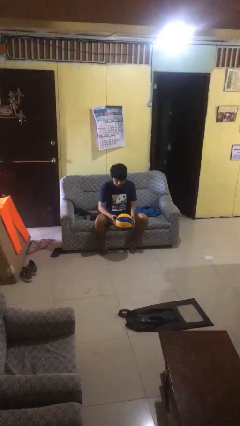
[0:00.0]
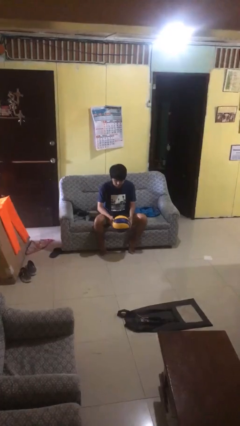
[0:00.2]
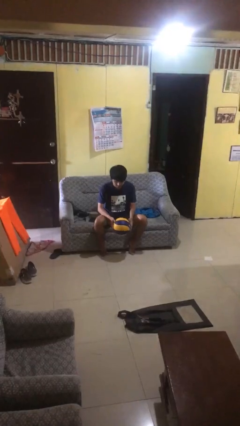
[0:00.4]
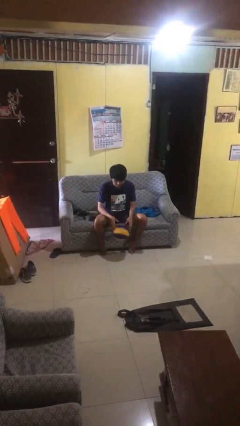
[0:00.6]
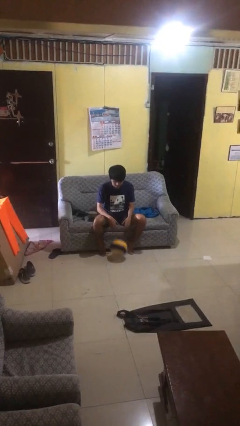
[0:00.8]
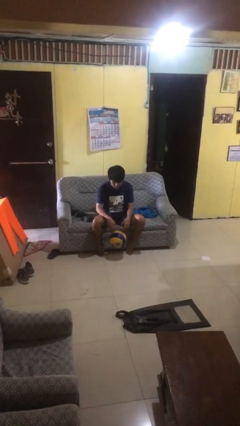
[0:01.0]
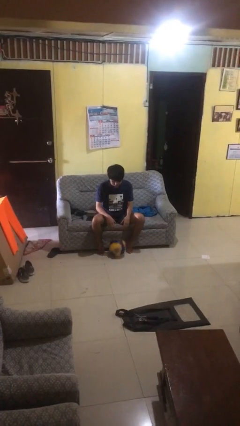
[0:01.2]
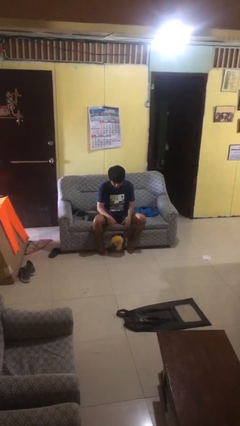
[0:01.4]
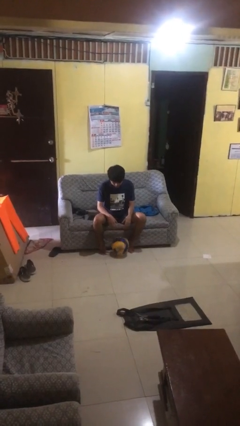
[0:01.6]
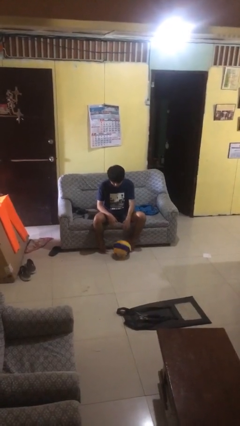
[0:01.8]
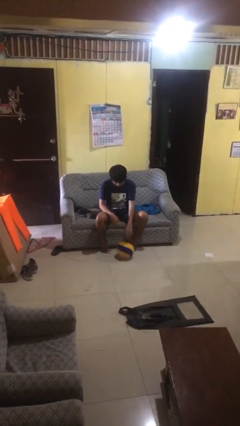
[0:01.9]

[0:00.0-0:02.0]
person drops object

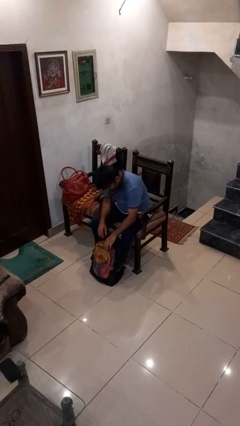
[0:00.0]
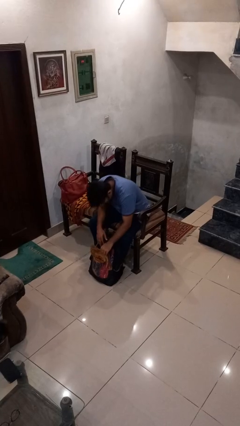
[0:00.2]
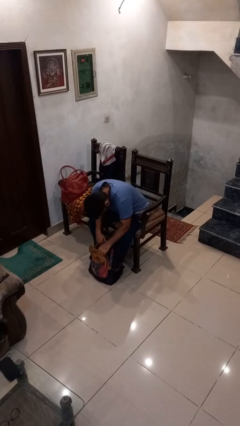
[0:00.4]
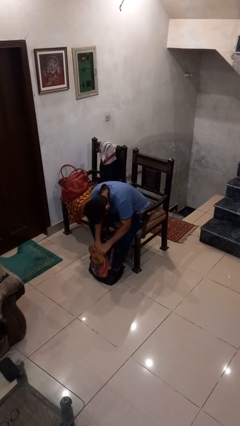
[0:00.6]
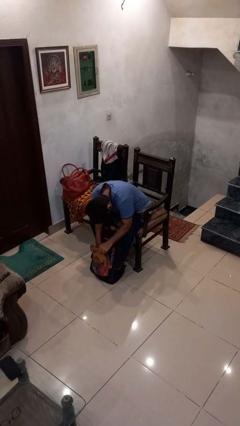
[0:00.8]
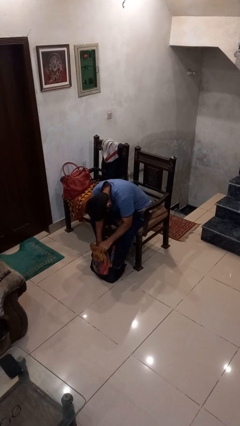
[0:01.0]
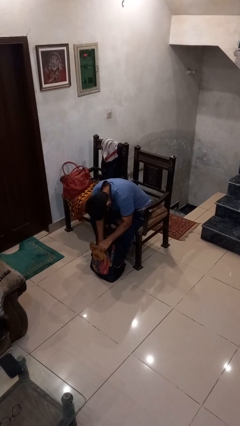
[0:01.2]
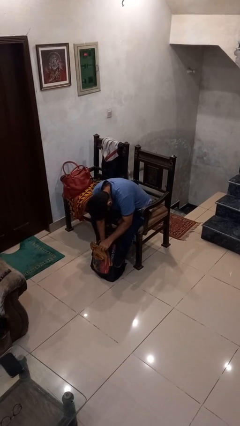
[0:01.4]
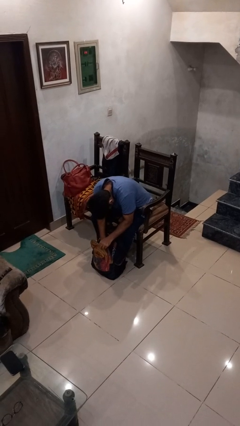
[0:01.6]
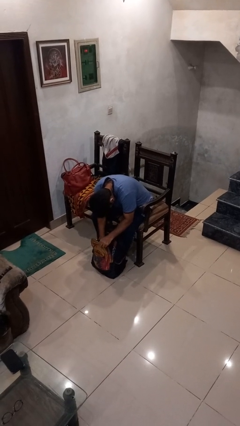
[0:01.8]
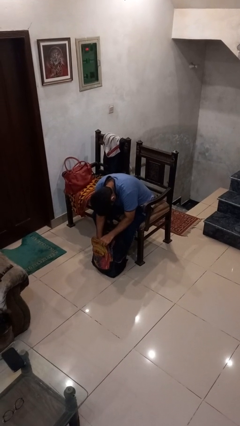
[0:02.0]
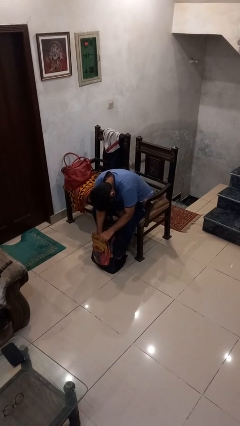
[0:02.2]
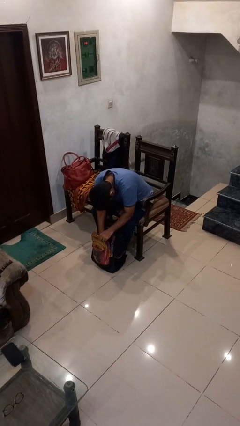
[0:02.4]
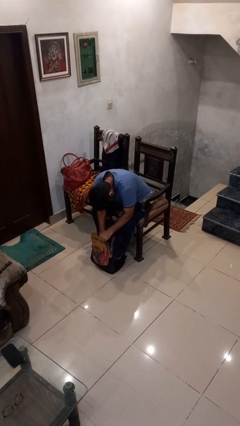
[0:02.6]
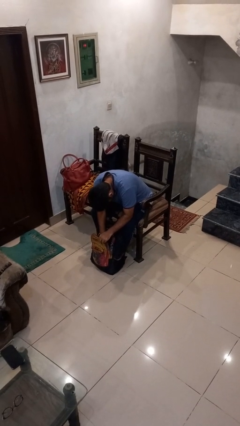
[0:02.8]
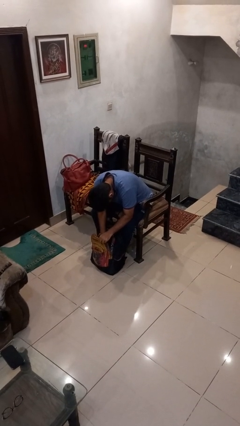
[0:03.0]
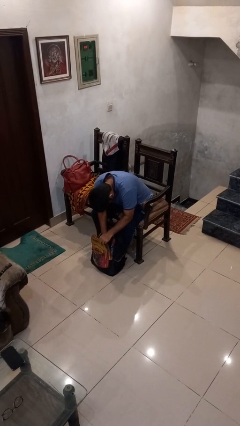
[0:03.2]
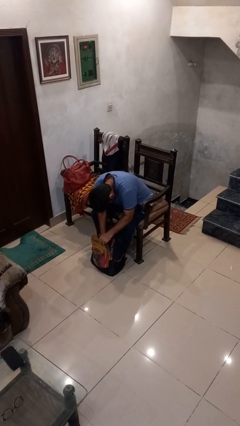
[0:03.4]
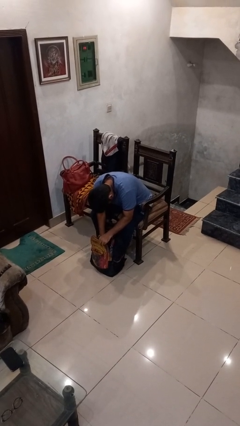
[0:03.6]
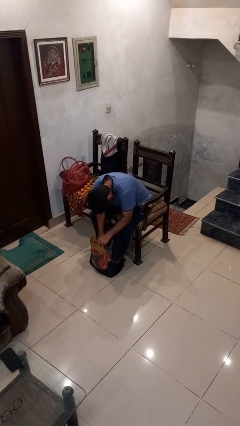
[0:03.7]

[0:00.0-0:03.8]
person searches in backpack

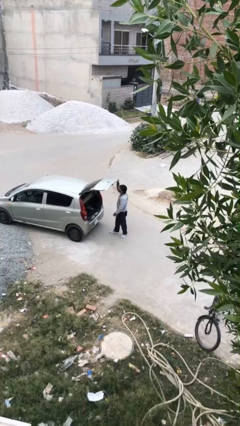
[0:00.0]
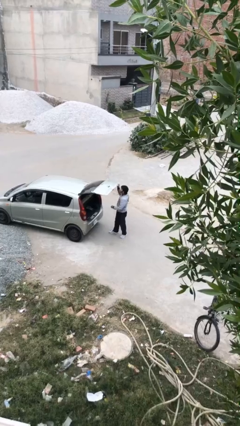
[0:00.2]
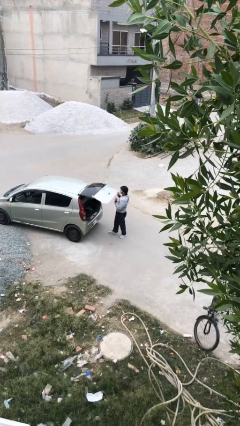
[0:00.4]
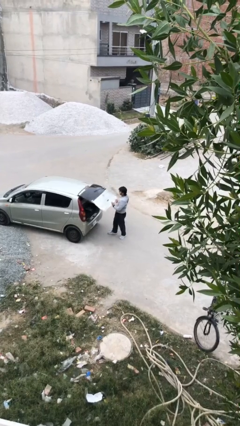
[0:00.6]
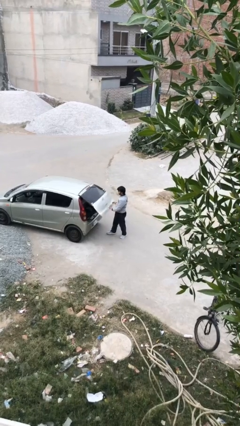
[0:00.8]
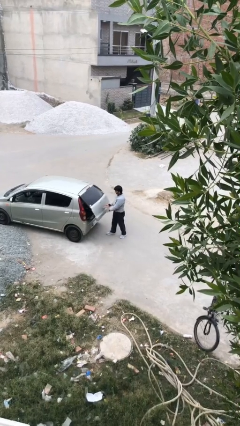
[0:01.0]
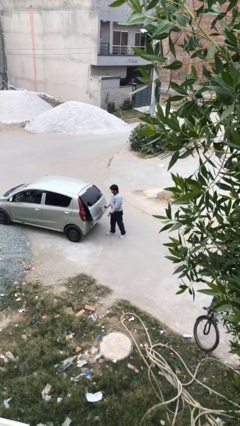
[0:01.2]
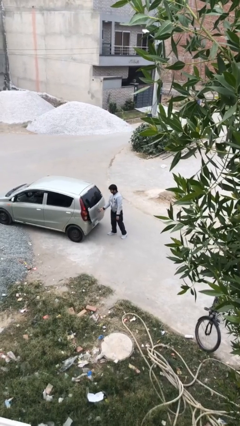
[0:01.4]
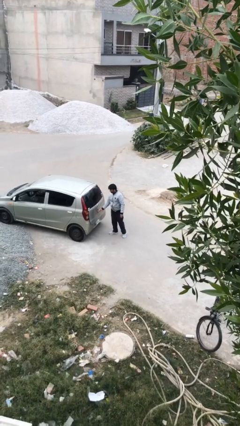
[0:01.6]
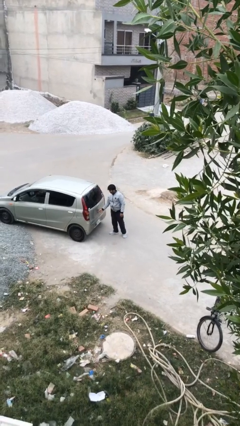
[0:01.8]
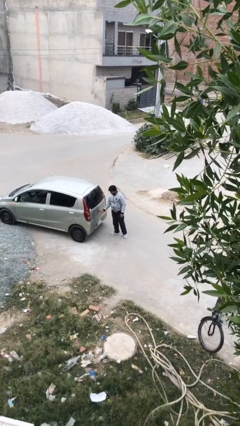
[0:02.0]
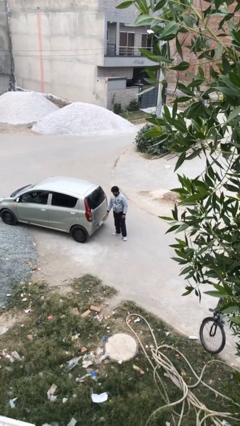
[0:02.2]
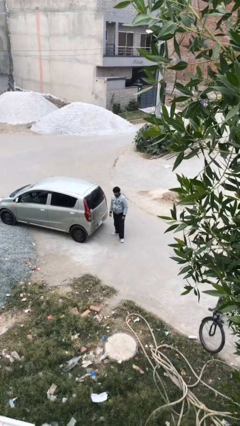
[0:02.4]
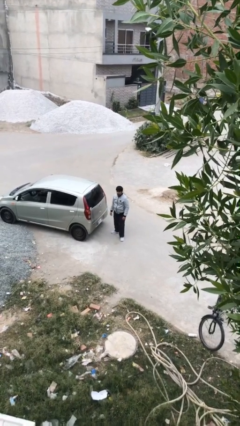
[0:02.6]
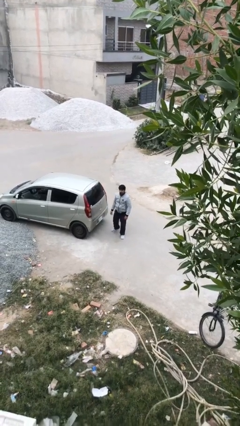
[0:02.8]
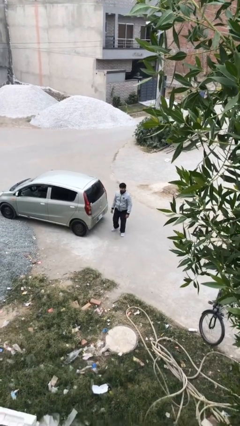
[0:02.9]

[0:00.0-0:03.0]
person closes car trunk

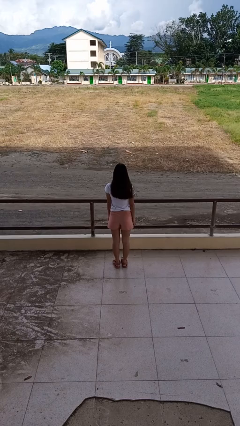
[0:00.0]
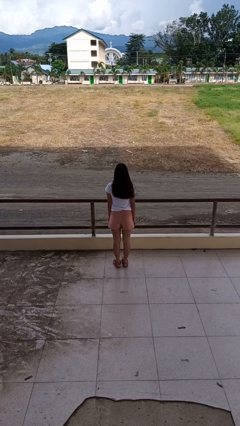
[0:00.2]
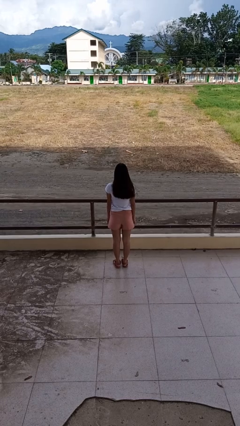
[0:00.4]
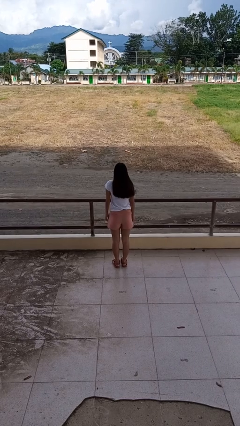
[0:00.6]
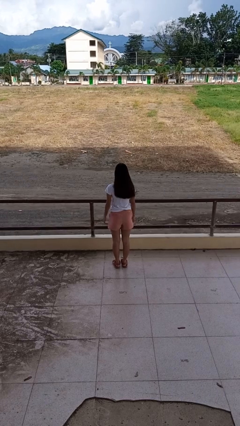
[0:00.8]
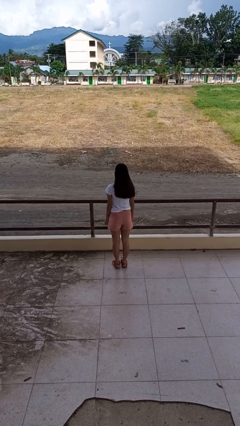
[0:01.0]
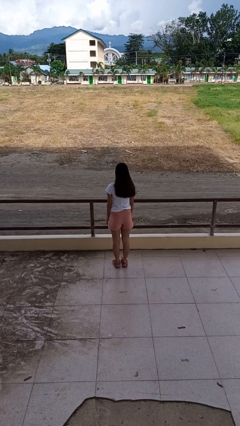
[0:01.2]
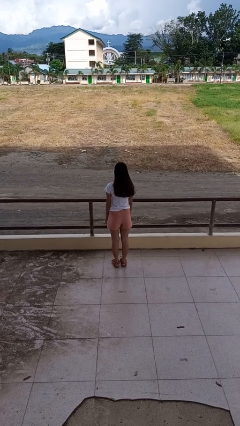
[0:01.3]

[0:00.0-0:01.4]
person shrugs

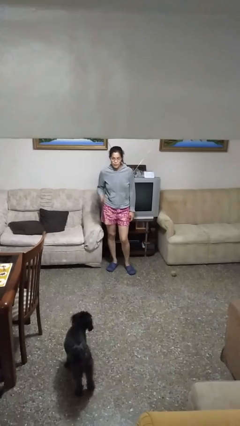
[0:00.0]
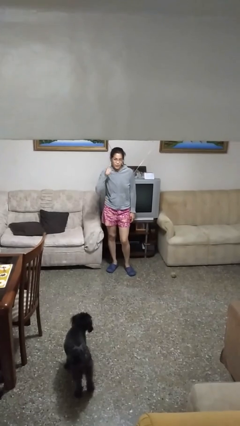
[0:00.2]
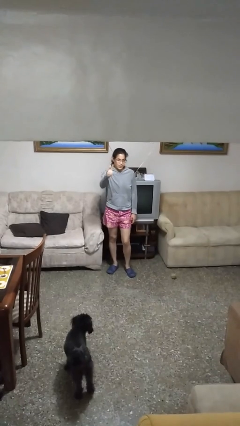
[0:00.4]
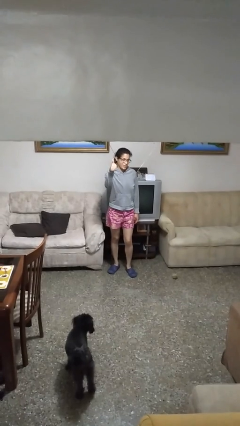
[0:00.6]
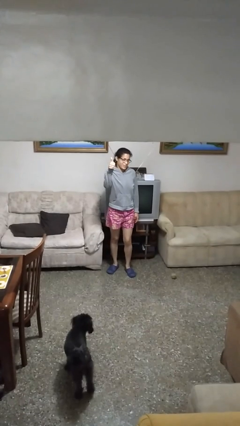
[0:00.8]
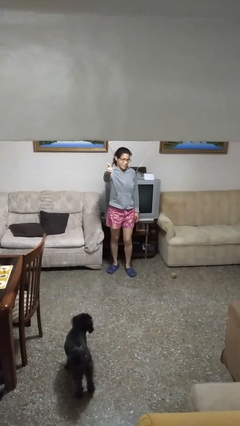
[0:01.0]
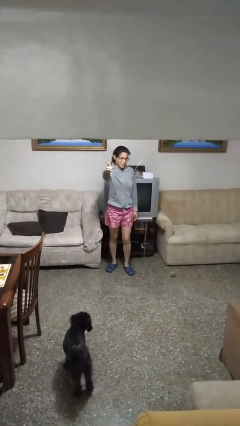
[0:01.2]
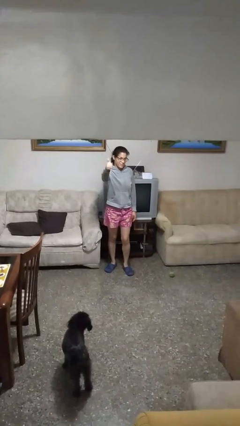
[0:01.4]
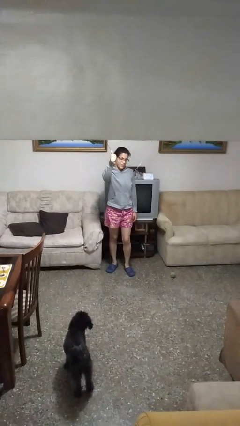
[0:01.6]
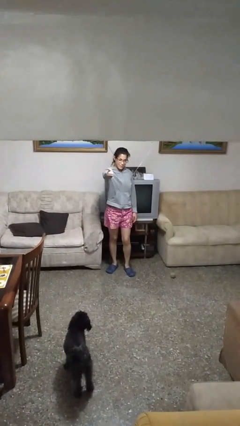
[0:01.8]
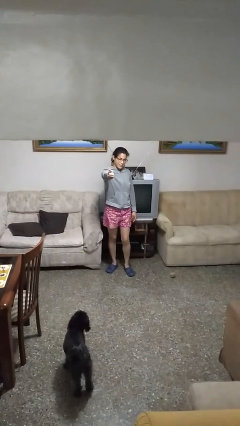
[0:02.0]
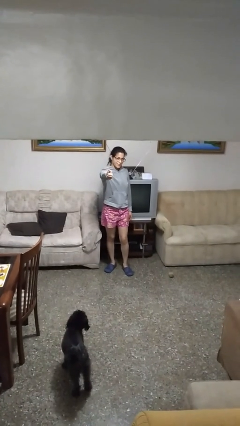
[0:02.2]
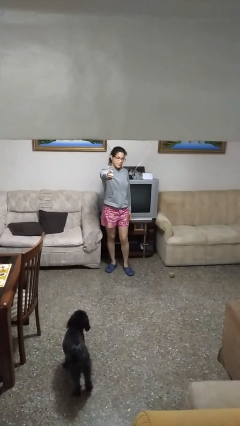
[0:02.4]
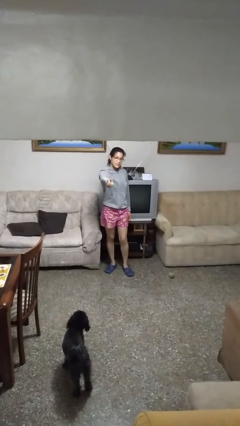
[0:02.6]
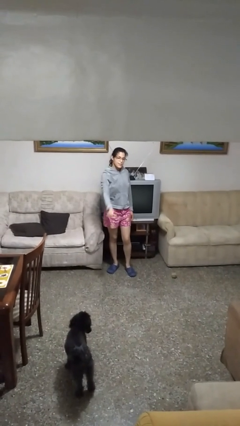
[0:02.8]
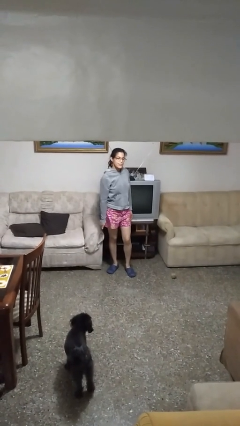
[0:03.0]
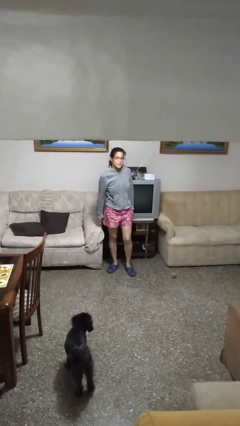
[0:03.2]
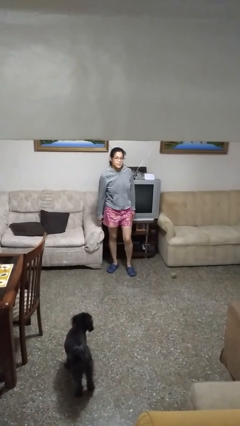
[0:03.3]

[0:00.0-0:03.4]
person gestures thumbs up

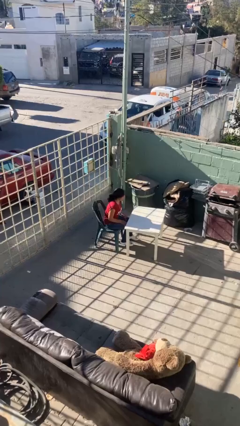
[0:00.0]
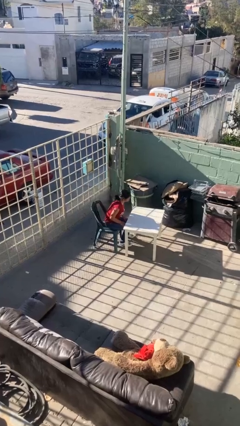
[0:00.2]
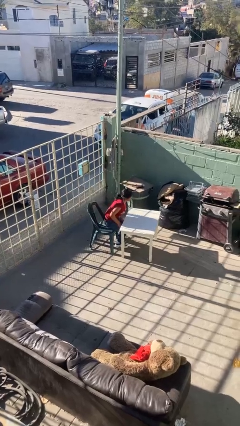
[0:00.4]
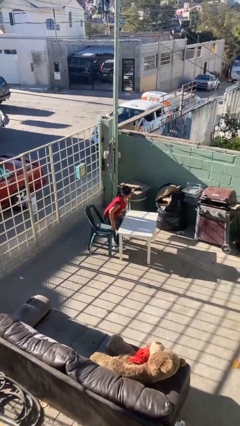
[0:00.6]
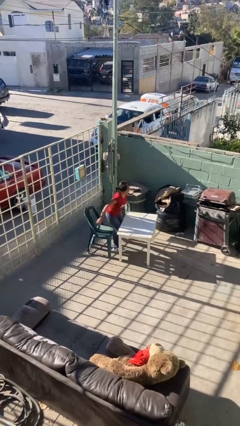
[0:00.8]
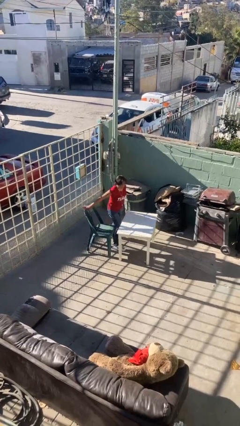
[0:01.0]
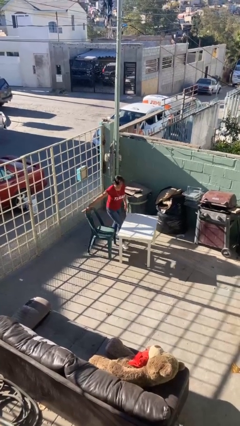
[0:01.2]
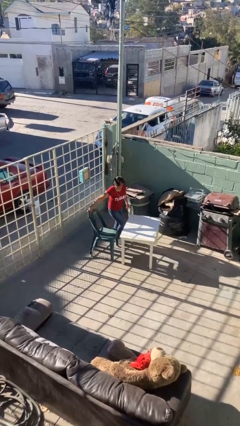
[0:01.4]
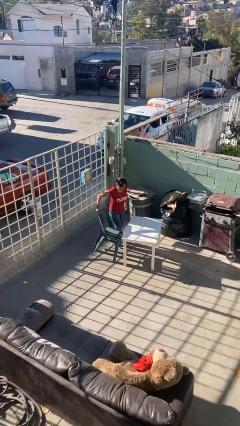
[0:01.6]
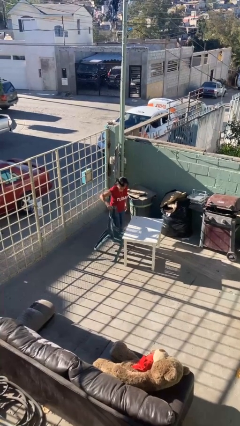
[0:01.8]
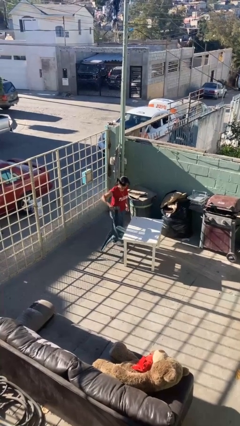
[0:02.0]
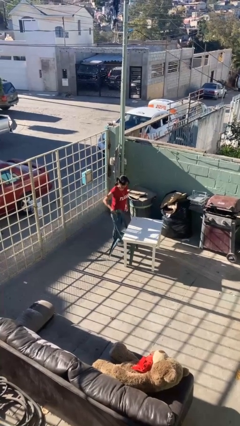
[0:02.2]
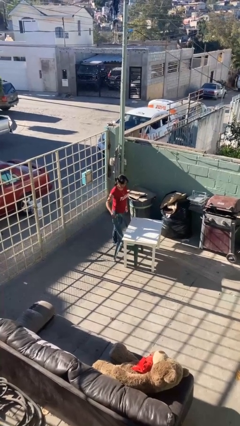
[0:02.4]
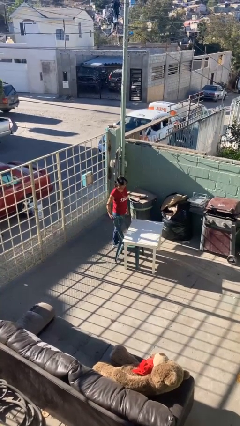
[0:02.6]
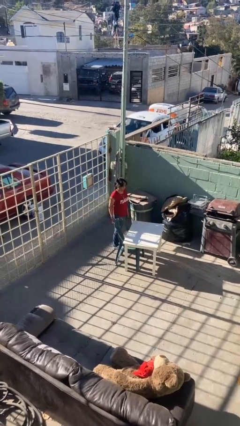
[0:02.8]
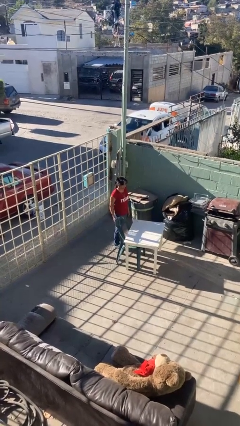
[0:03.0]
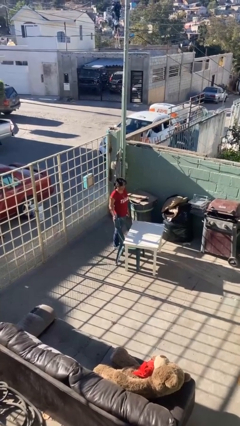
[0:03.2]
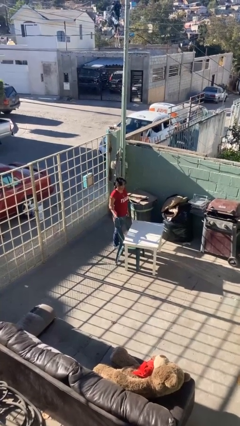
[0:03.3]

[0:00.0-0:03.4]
person stands up

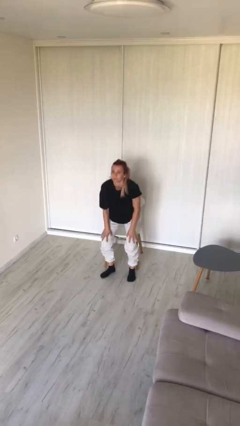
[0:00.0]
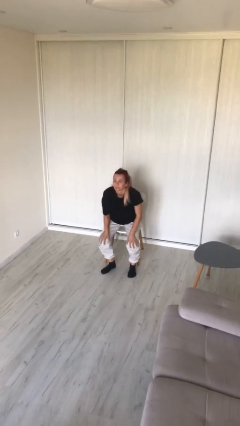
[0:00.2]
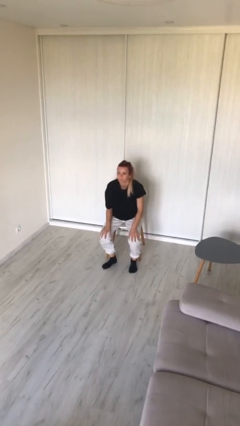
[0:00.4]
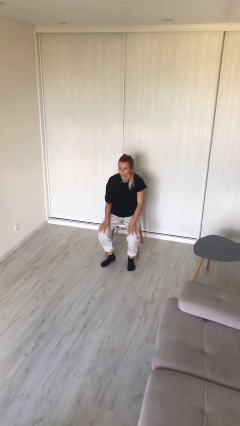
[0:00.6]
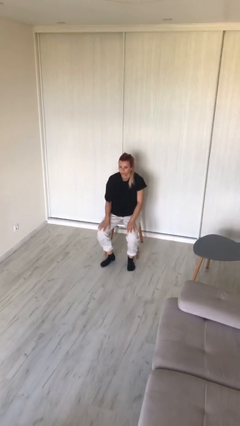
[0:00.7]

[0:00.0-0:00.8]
person sits down
